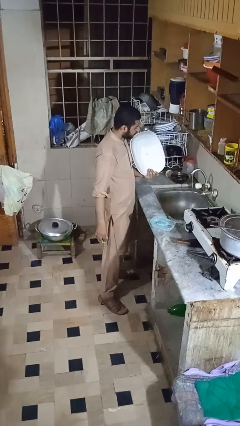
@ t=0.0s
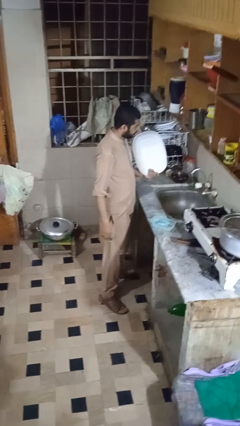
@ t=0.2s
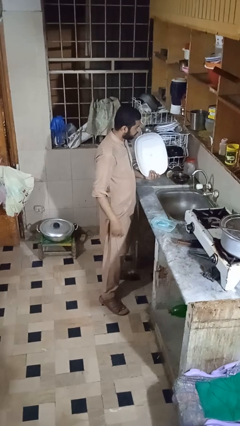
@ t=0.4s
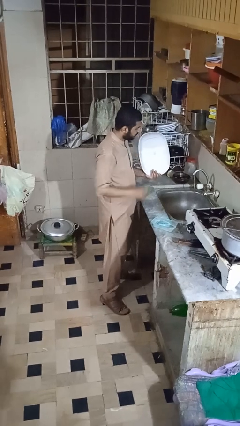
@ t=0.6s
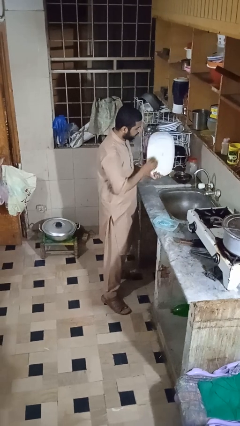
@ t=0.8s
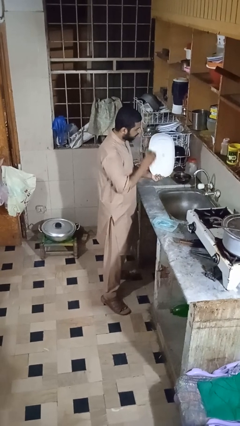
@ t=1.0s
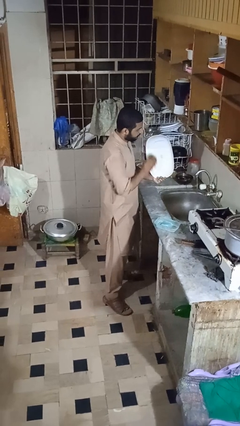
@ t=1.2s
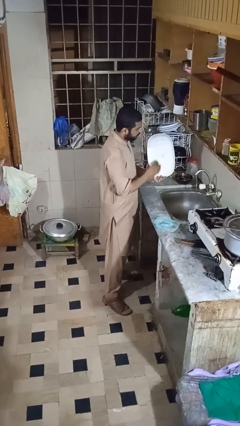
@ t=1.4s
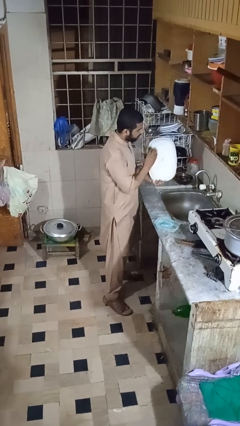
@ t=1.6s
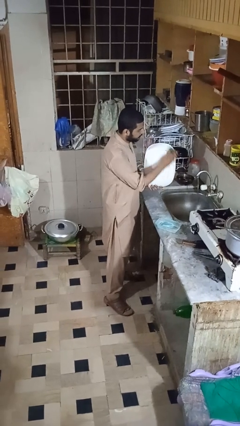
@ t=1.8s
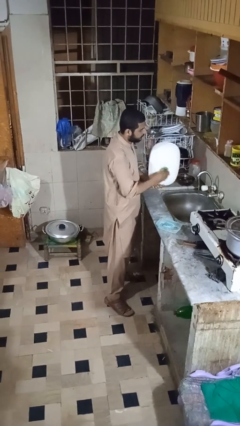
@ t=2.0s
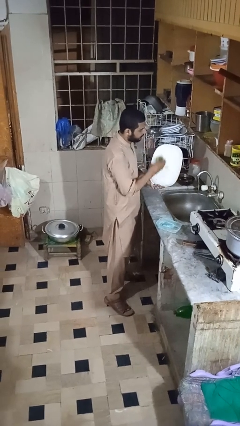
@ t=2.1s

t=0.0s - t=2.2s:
person washes dish

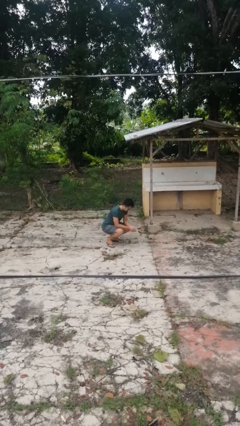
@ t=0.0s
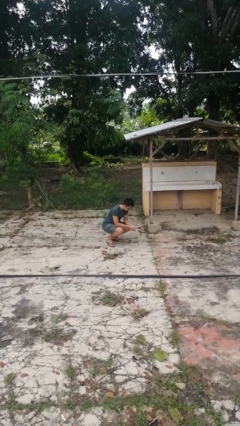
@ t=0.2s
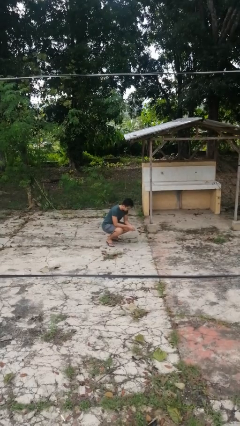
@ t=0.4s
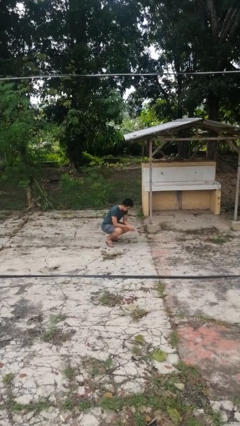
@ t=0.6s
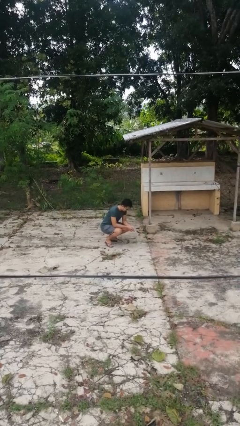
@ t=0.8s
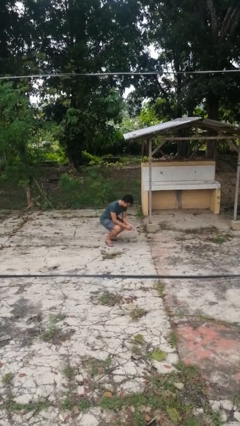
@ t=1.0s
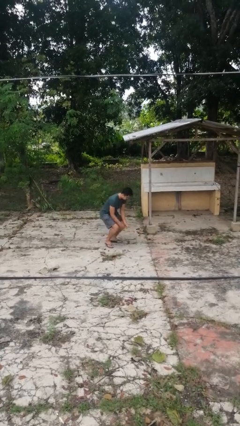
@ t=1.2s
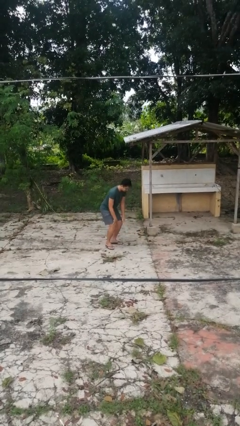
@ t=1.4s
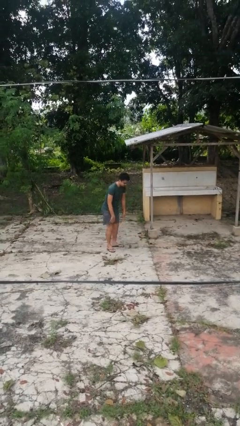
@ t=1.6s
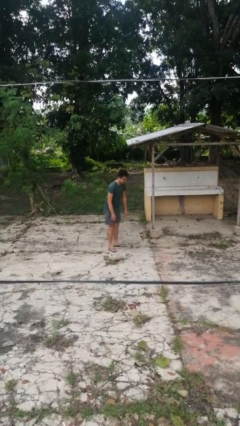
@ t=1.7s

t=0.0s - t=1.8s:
person stands up

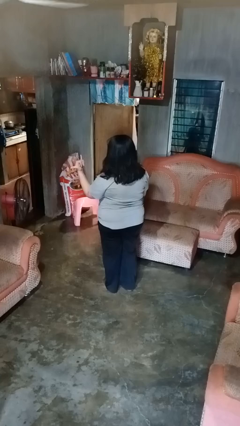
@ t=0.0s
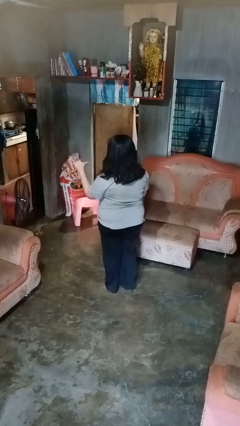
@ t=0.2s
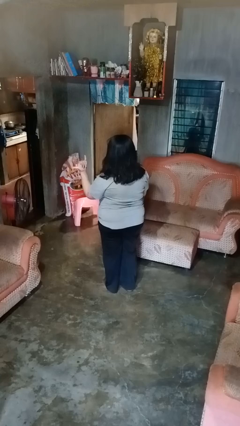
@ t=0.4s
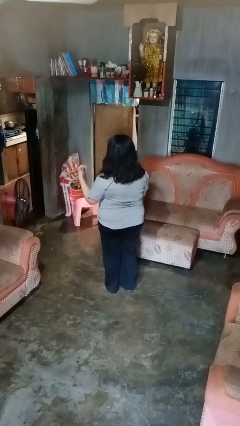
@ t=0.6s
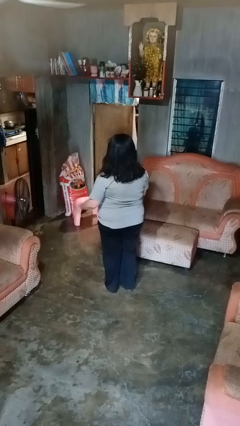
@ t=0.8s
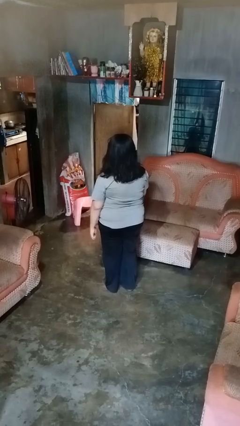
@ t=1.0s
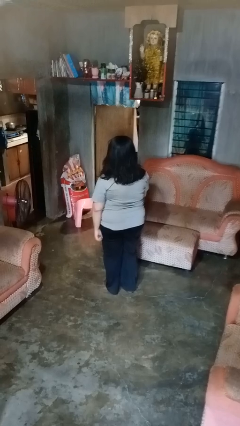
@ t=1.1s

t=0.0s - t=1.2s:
person gestures hang loose

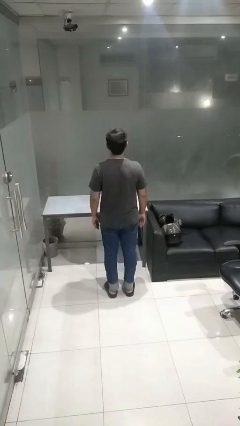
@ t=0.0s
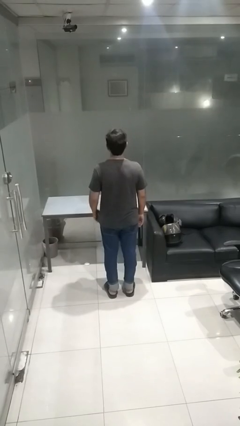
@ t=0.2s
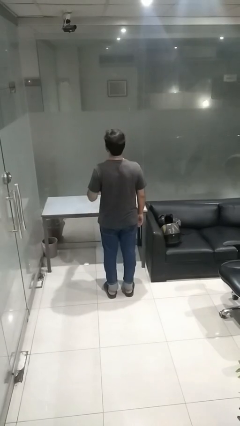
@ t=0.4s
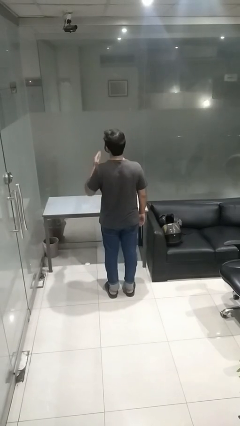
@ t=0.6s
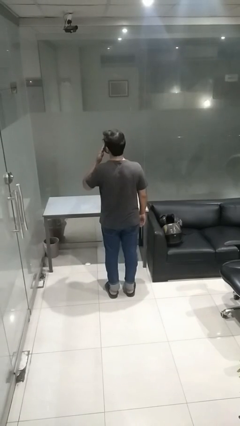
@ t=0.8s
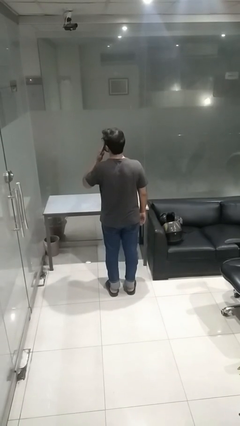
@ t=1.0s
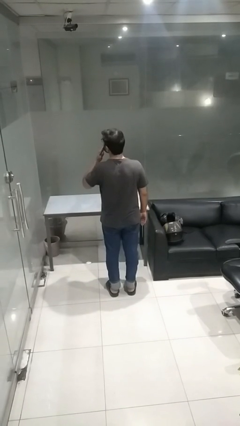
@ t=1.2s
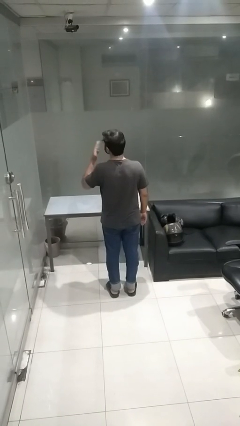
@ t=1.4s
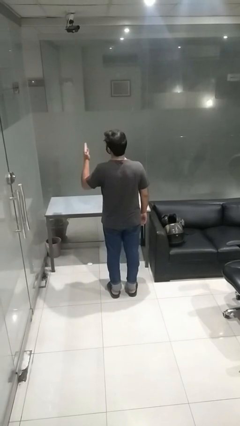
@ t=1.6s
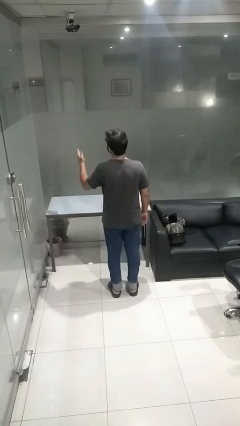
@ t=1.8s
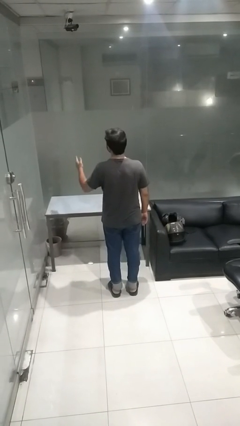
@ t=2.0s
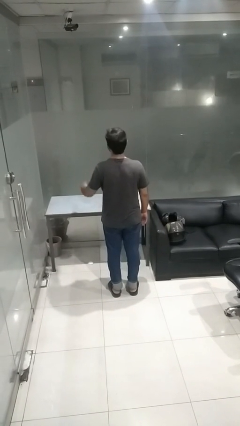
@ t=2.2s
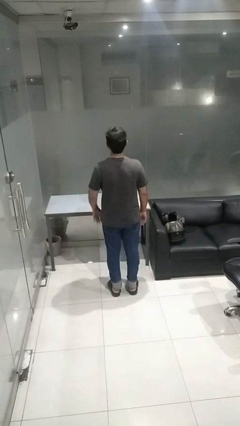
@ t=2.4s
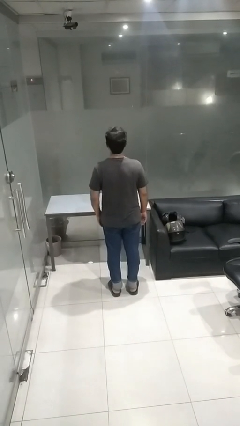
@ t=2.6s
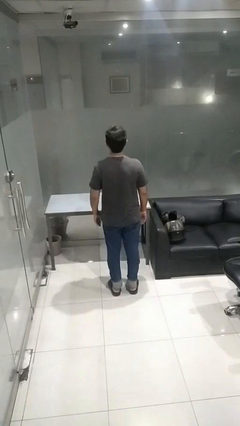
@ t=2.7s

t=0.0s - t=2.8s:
person gestures blow kiss

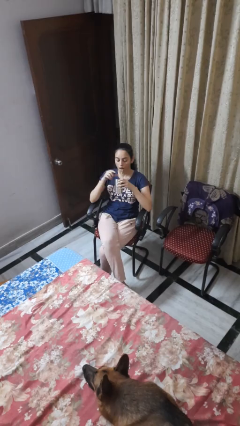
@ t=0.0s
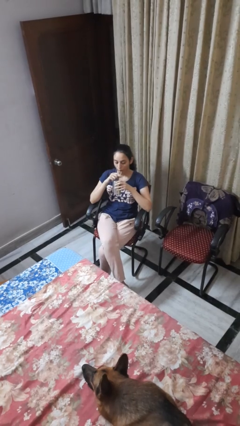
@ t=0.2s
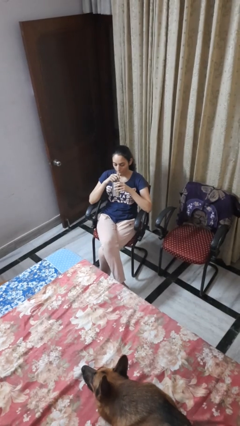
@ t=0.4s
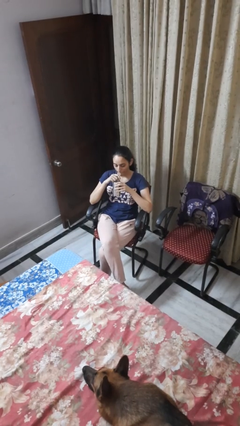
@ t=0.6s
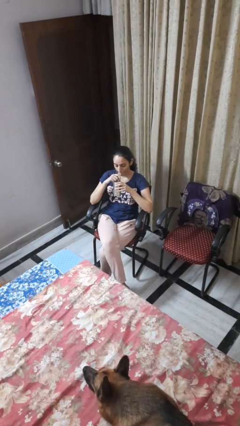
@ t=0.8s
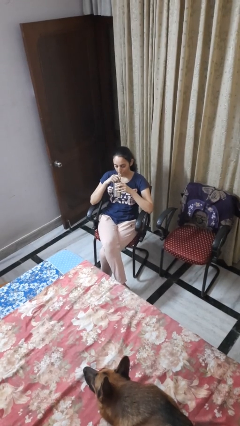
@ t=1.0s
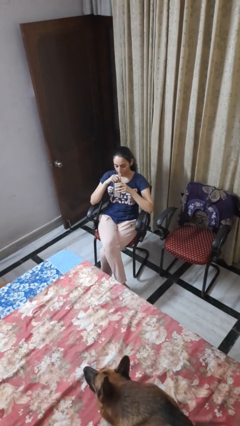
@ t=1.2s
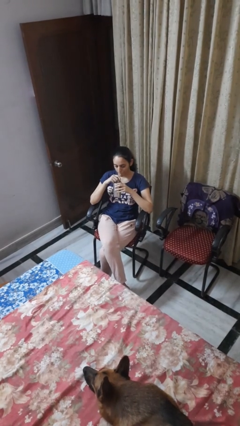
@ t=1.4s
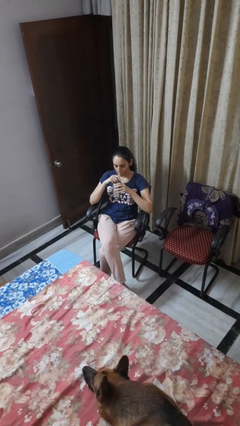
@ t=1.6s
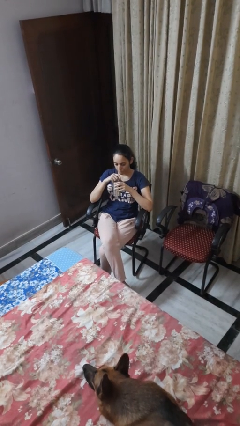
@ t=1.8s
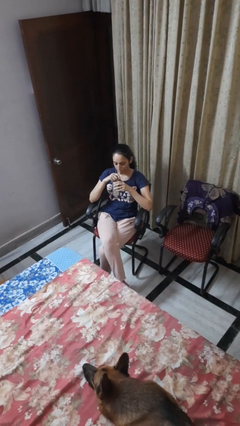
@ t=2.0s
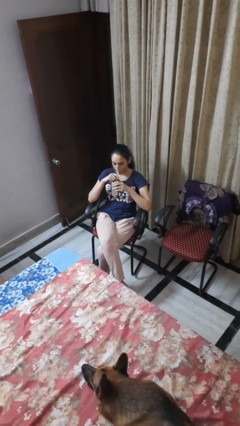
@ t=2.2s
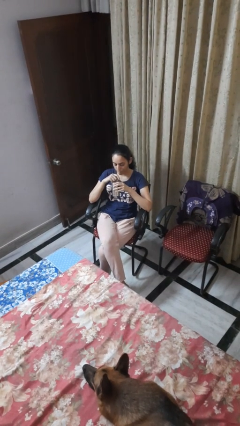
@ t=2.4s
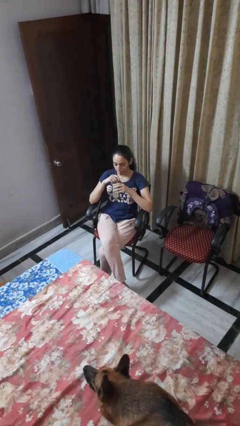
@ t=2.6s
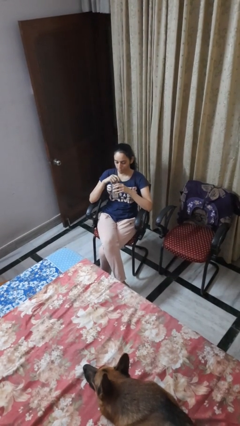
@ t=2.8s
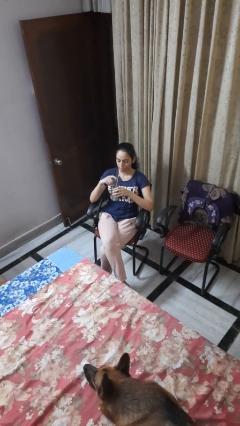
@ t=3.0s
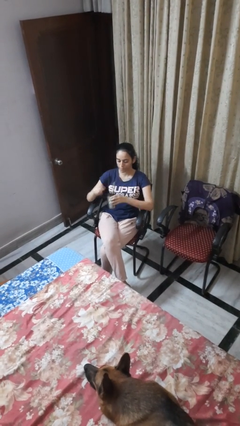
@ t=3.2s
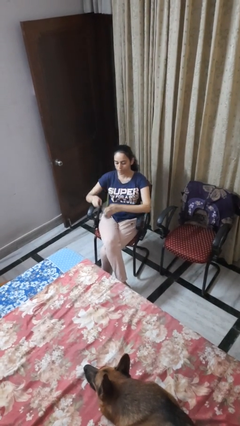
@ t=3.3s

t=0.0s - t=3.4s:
person drinks from straw

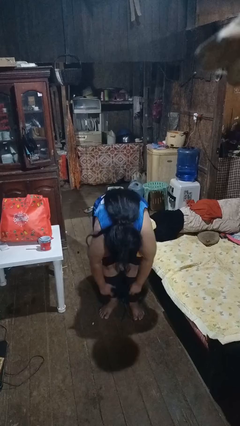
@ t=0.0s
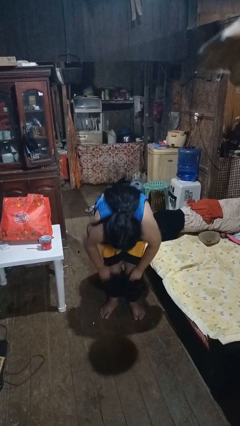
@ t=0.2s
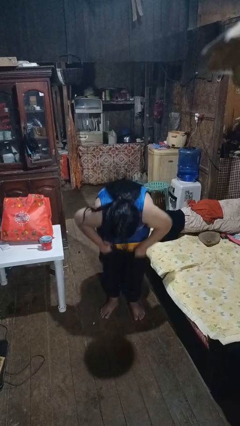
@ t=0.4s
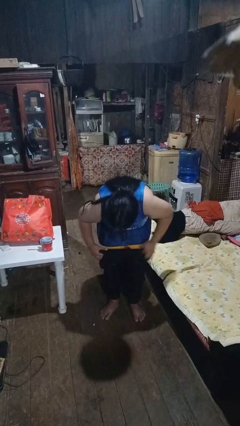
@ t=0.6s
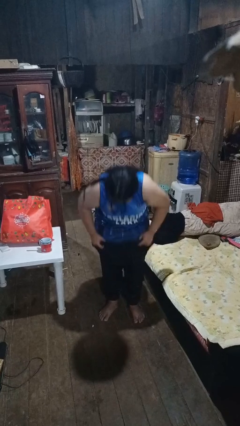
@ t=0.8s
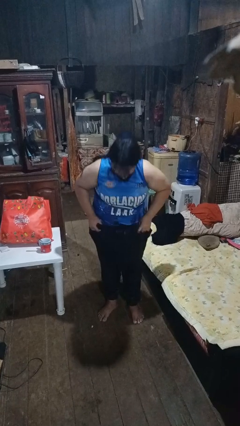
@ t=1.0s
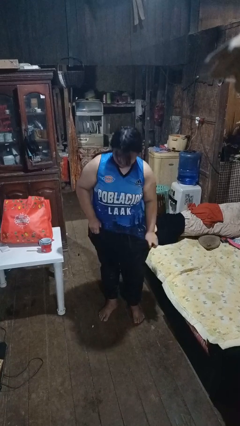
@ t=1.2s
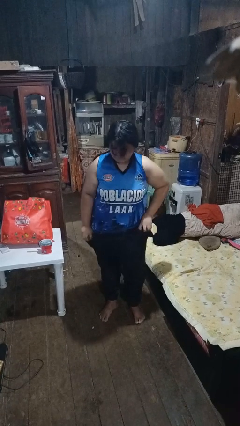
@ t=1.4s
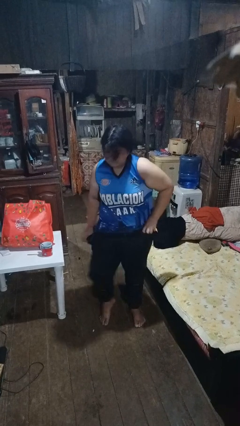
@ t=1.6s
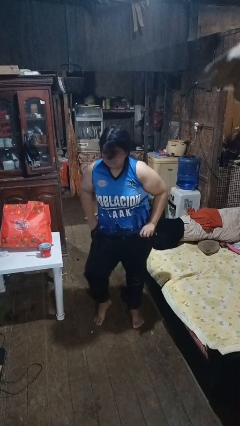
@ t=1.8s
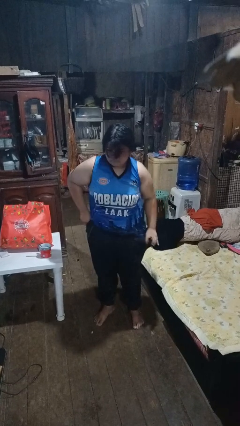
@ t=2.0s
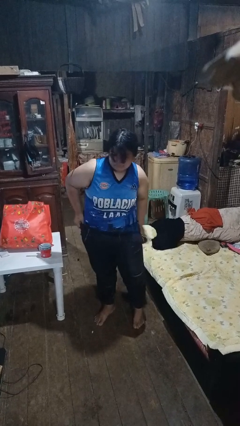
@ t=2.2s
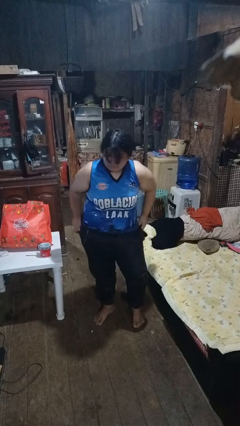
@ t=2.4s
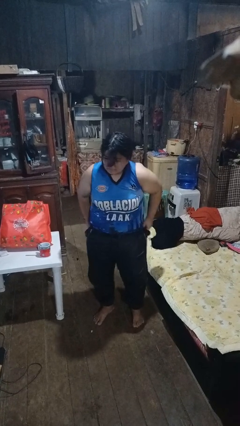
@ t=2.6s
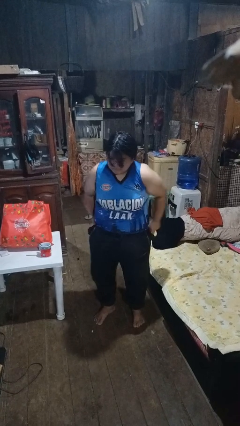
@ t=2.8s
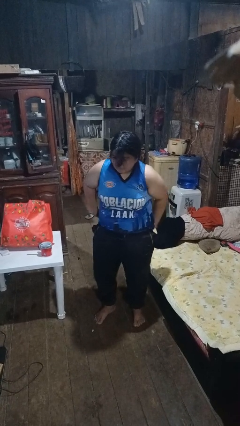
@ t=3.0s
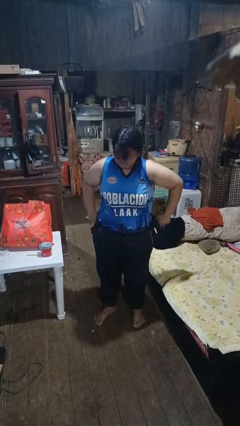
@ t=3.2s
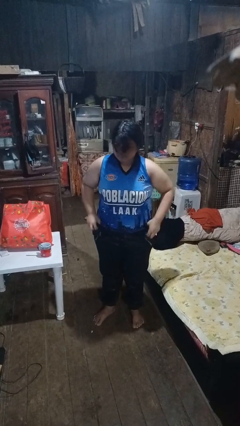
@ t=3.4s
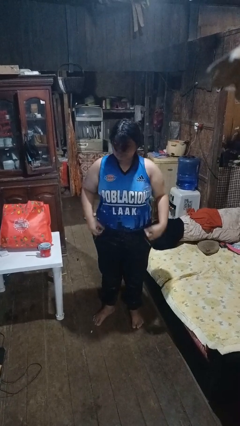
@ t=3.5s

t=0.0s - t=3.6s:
person puts on pants

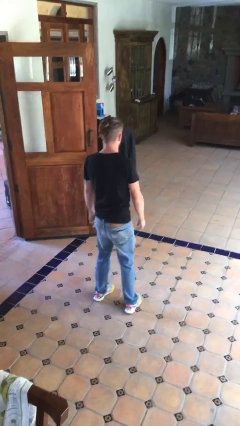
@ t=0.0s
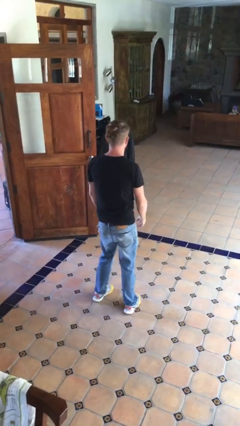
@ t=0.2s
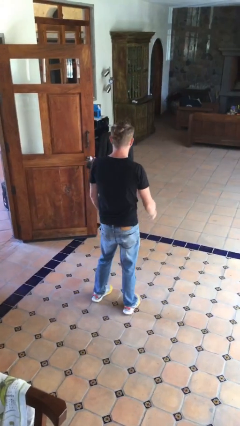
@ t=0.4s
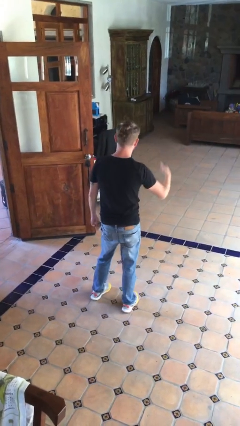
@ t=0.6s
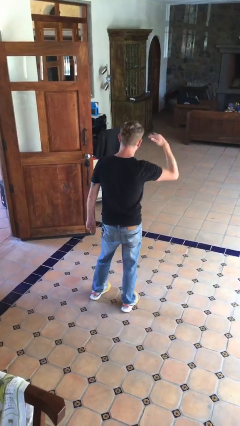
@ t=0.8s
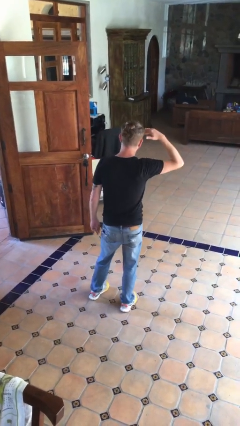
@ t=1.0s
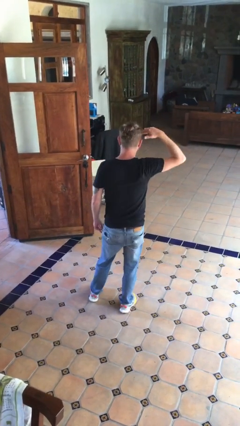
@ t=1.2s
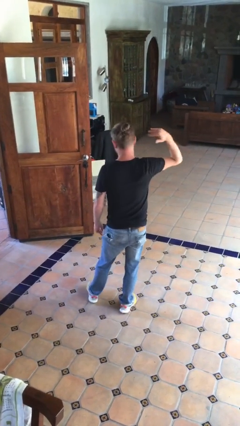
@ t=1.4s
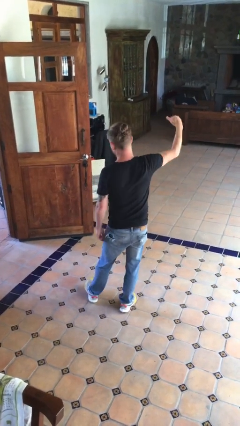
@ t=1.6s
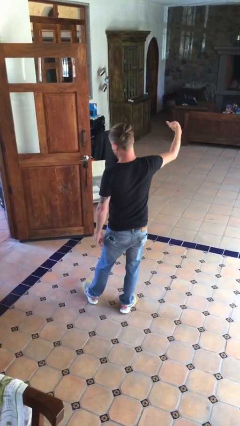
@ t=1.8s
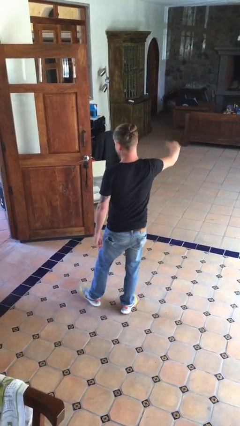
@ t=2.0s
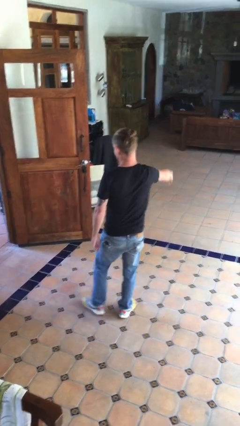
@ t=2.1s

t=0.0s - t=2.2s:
person salutes
